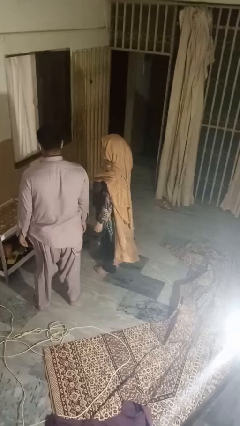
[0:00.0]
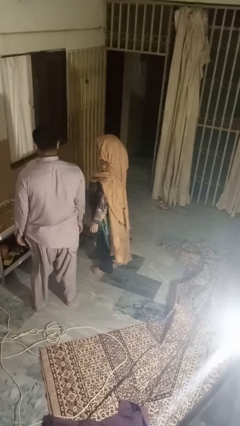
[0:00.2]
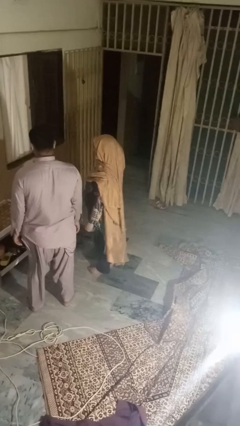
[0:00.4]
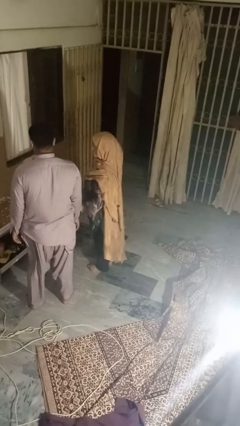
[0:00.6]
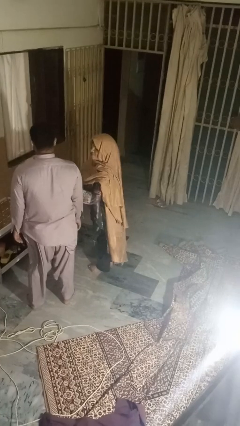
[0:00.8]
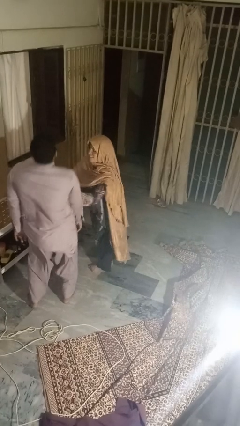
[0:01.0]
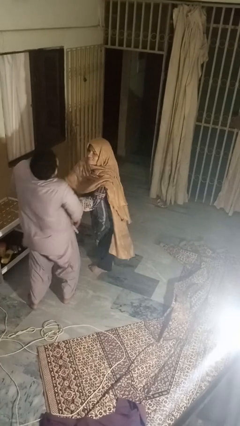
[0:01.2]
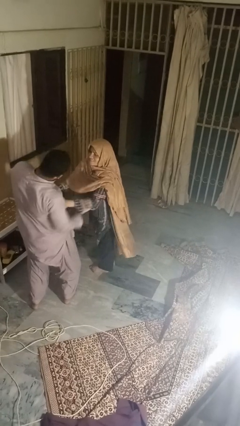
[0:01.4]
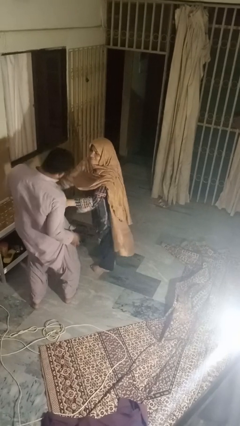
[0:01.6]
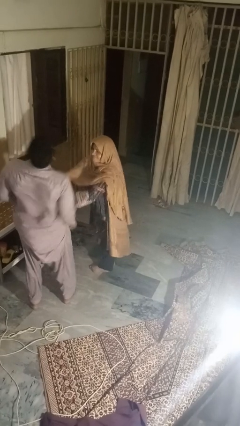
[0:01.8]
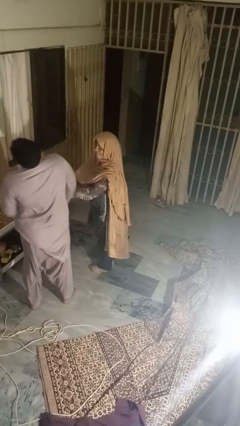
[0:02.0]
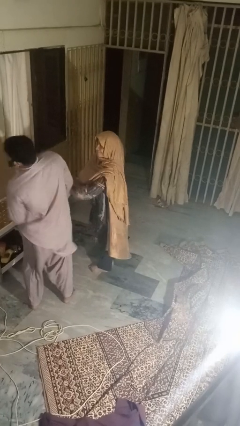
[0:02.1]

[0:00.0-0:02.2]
person tickles person

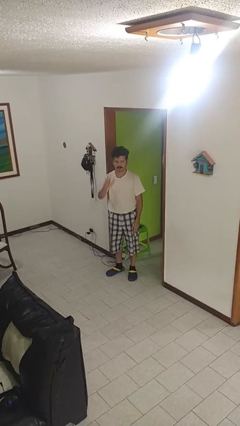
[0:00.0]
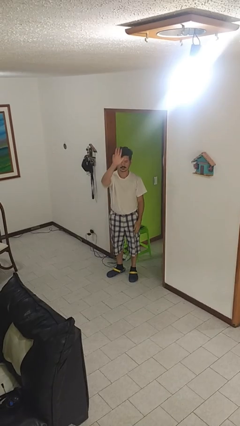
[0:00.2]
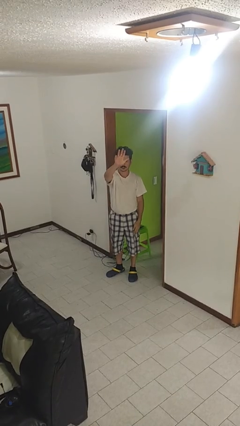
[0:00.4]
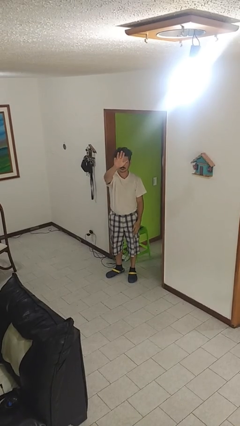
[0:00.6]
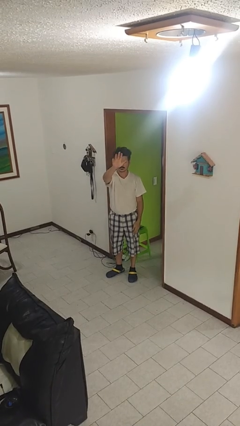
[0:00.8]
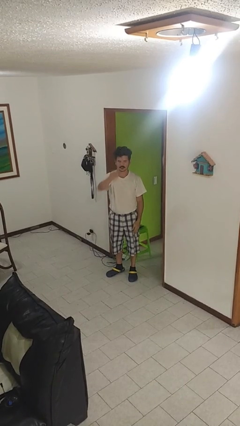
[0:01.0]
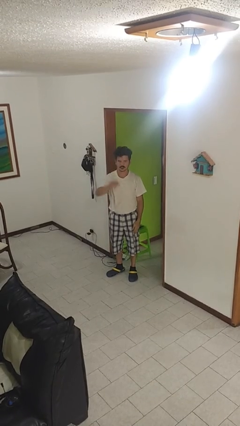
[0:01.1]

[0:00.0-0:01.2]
person gestures number four

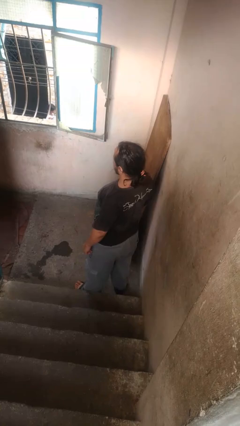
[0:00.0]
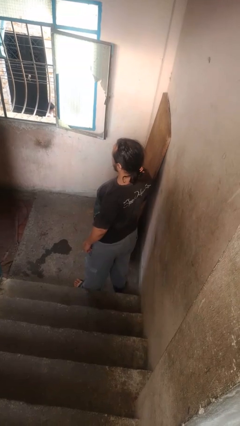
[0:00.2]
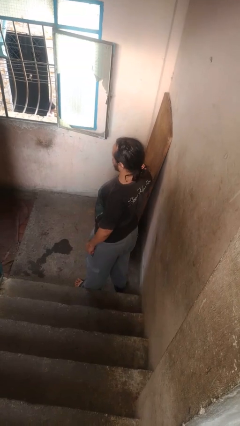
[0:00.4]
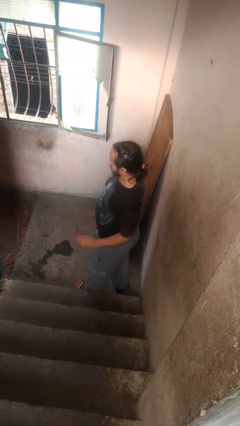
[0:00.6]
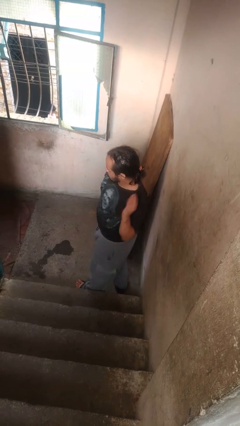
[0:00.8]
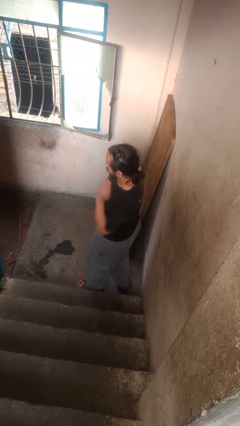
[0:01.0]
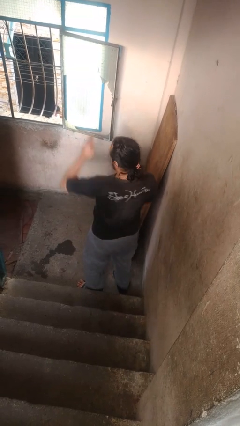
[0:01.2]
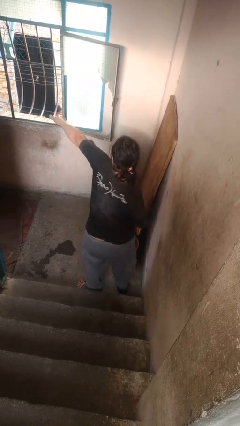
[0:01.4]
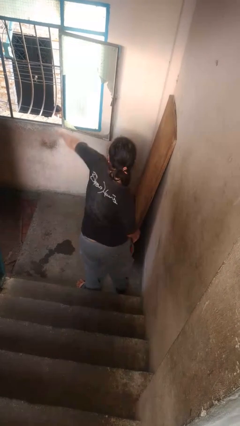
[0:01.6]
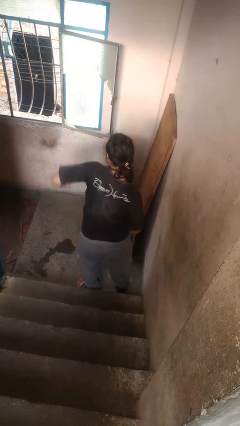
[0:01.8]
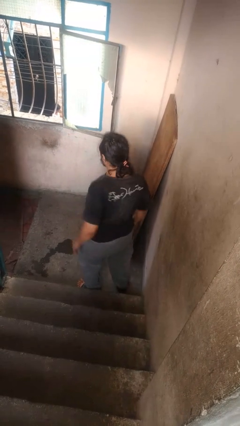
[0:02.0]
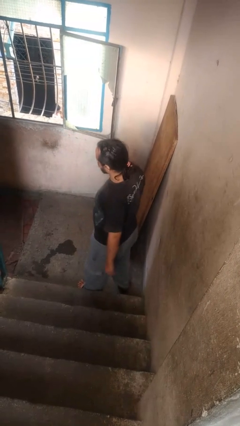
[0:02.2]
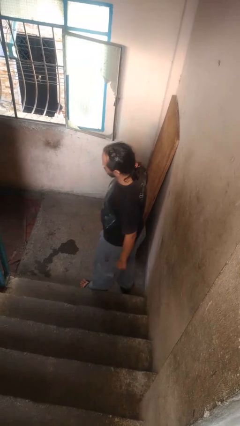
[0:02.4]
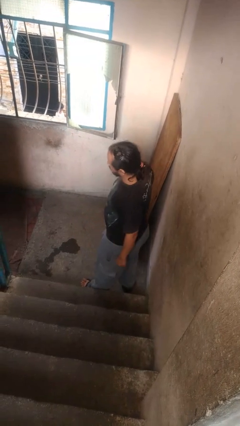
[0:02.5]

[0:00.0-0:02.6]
person karate chop

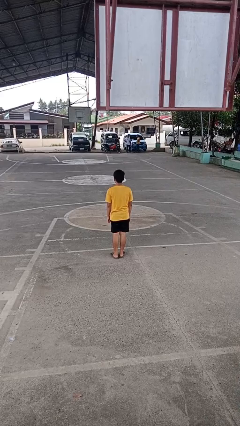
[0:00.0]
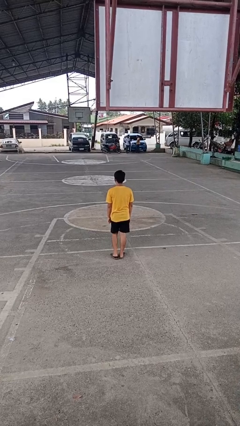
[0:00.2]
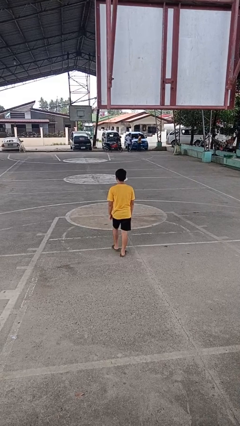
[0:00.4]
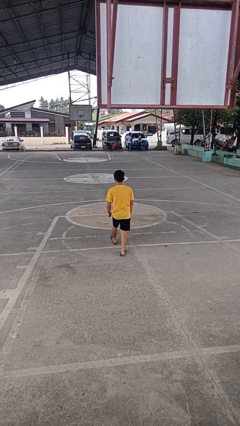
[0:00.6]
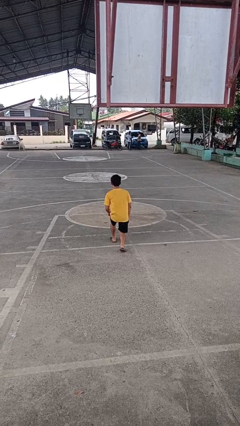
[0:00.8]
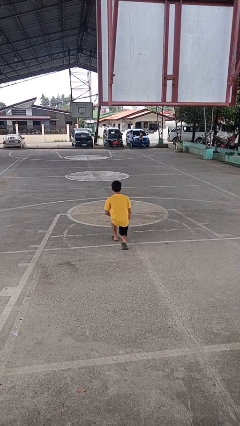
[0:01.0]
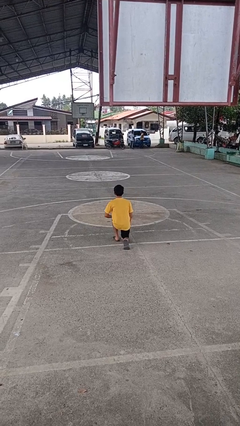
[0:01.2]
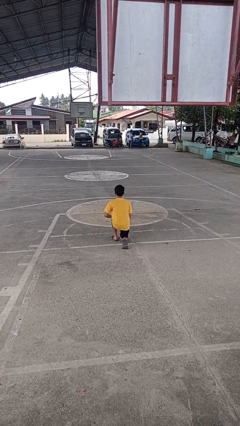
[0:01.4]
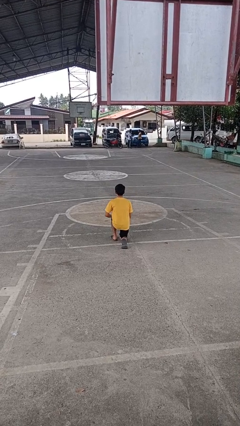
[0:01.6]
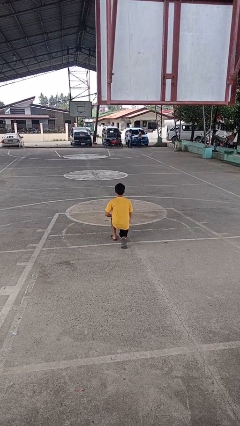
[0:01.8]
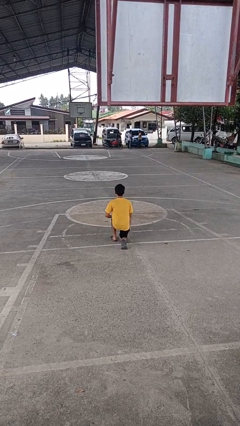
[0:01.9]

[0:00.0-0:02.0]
person kneels

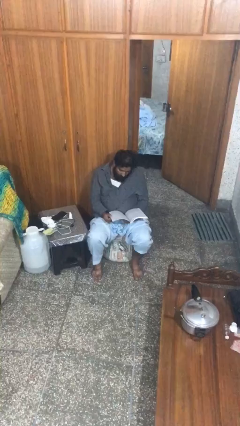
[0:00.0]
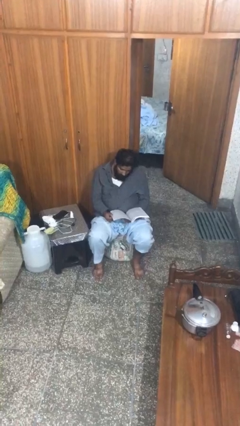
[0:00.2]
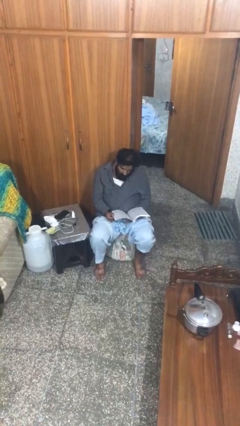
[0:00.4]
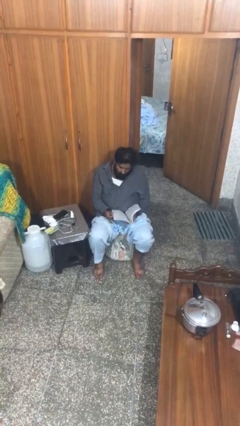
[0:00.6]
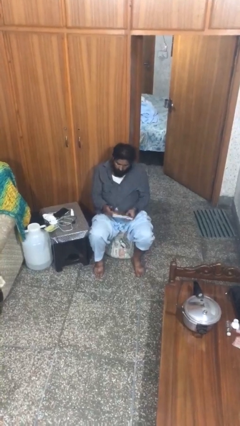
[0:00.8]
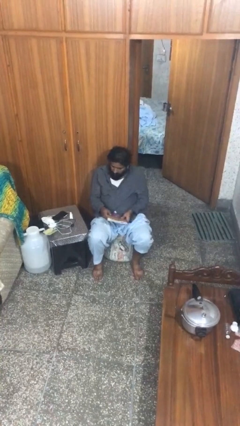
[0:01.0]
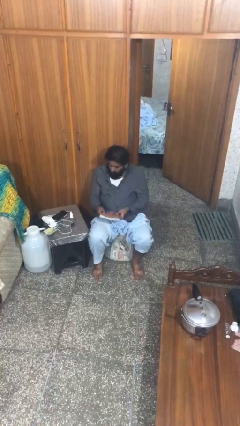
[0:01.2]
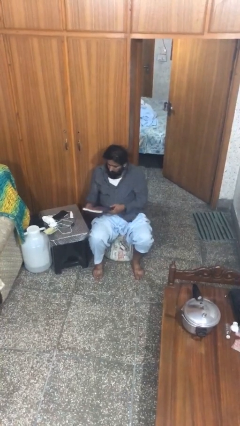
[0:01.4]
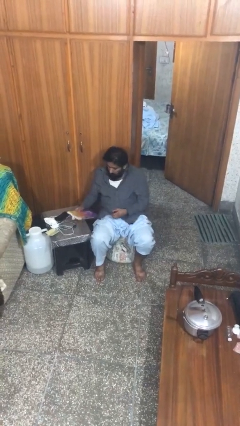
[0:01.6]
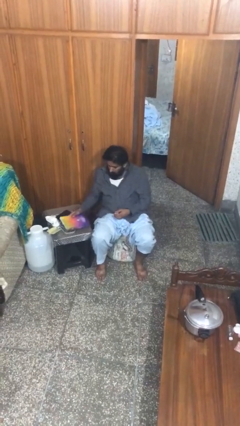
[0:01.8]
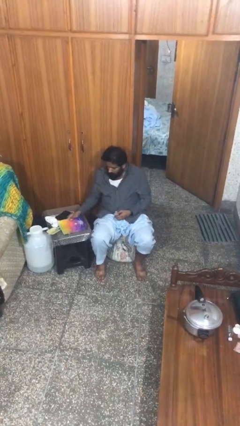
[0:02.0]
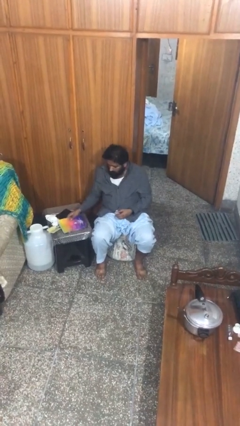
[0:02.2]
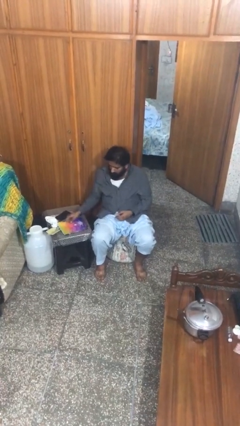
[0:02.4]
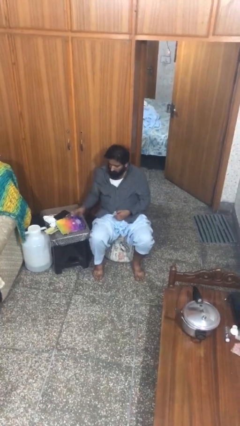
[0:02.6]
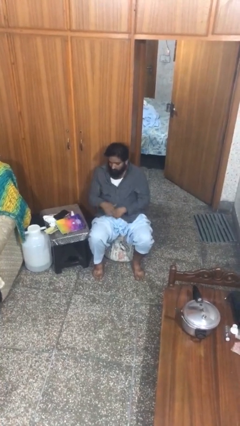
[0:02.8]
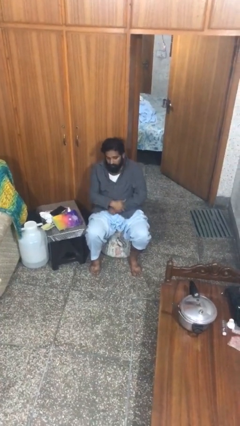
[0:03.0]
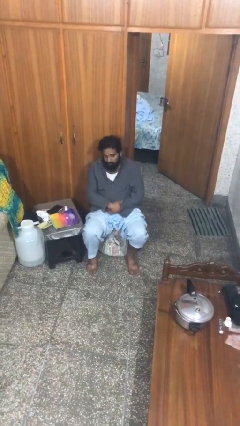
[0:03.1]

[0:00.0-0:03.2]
person puts down object on table

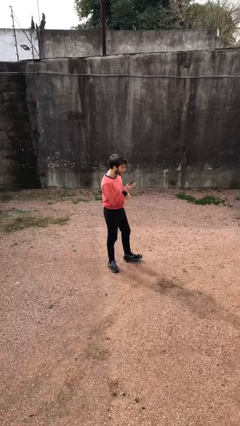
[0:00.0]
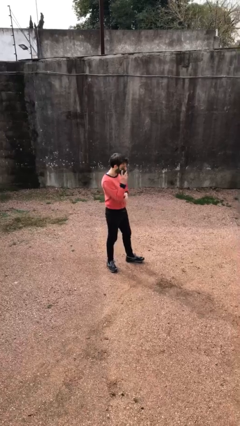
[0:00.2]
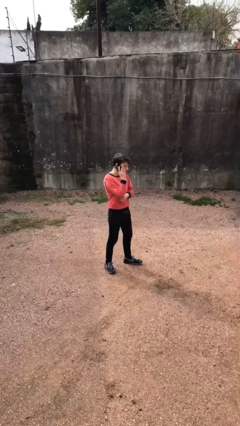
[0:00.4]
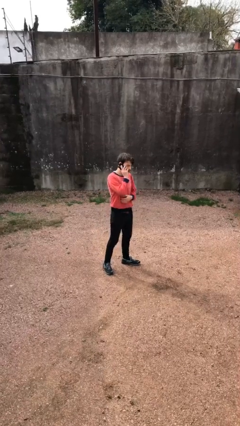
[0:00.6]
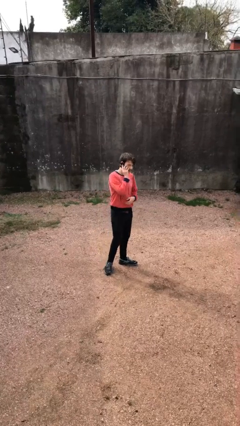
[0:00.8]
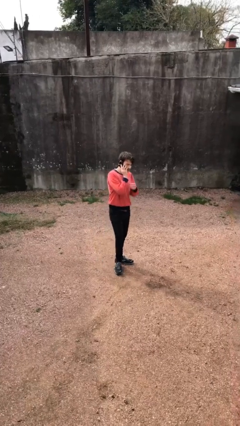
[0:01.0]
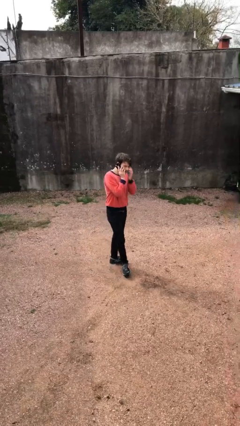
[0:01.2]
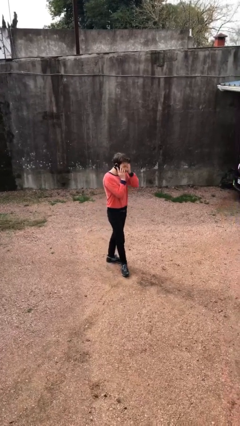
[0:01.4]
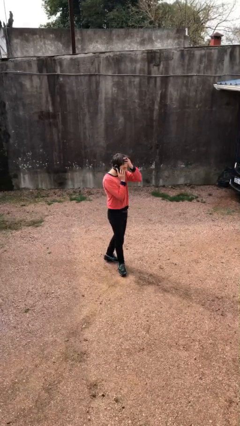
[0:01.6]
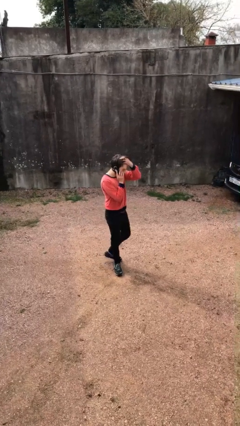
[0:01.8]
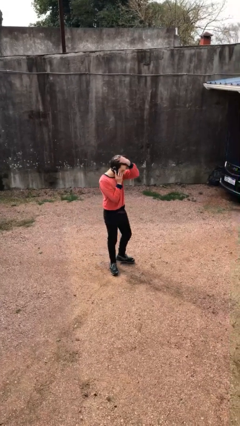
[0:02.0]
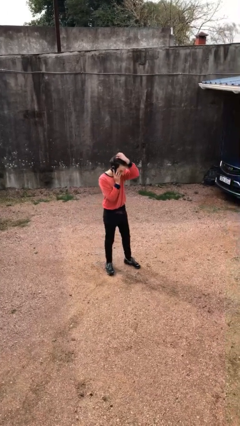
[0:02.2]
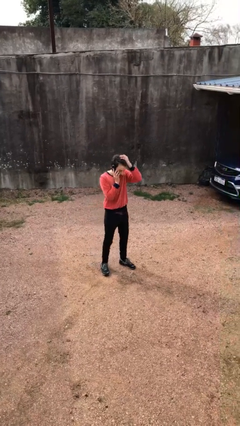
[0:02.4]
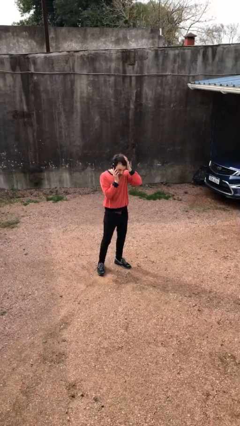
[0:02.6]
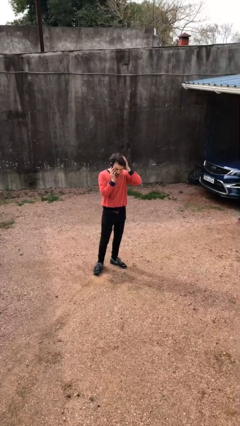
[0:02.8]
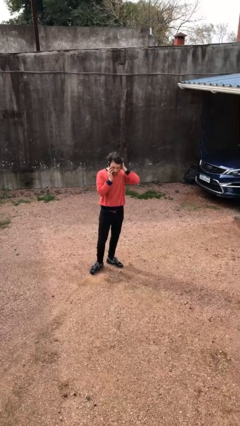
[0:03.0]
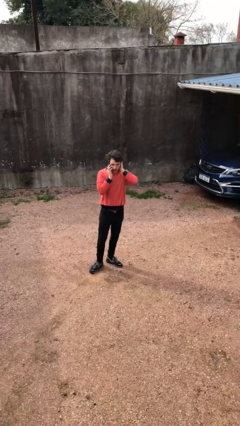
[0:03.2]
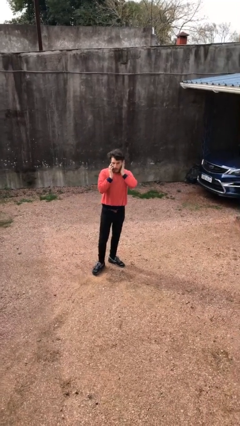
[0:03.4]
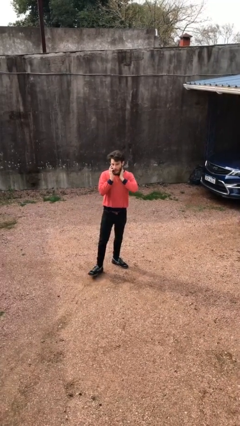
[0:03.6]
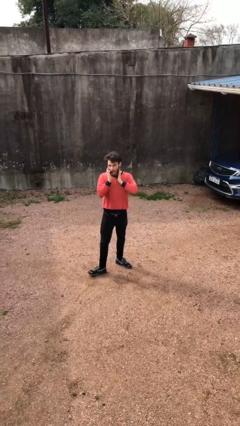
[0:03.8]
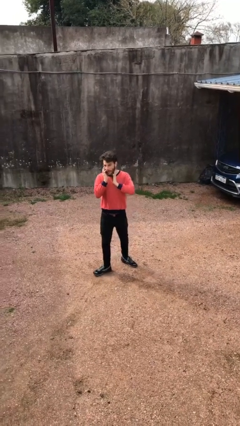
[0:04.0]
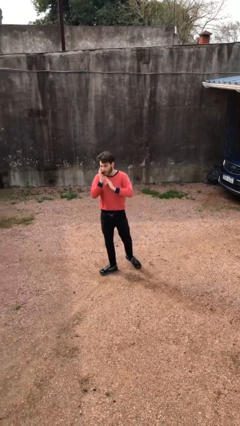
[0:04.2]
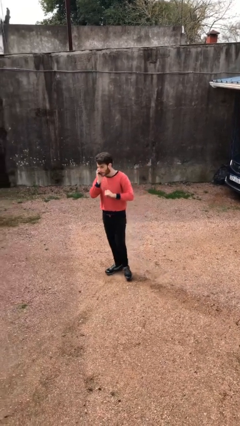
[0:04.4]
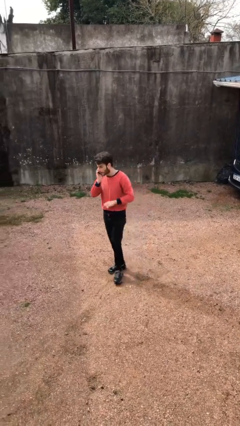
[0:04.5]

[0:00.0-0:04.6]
person talks on phone

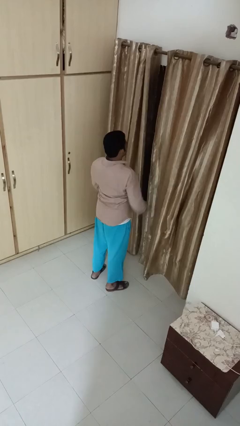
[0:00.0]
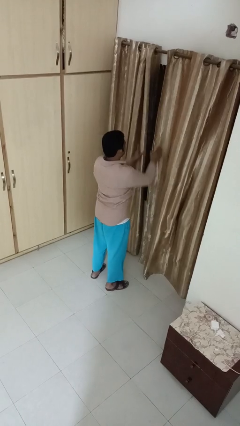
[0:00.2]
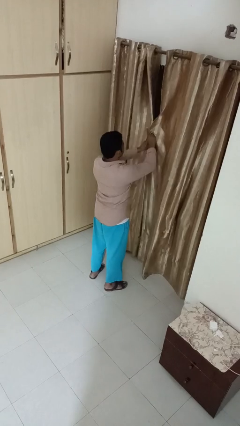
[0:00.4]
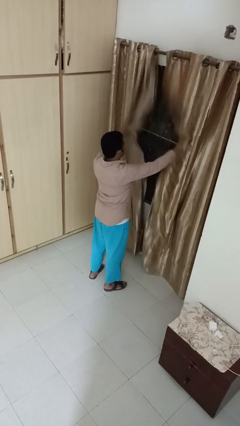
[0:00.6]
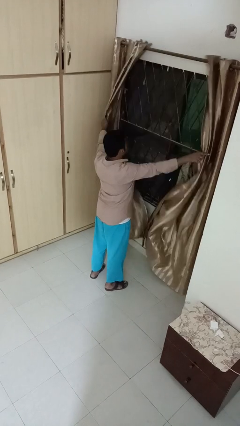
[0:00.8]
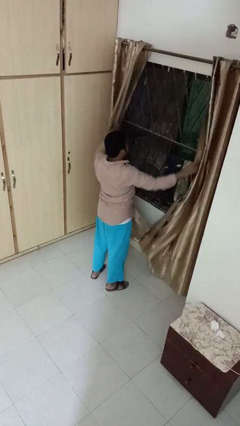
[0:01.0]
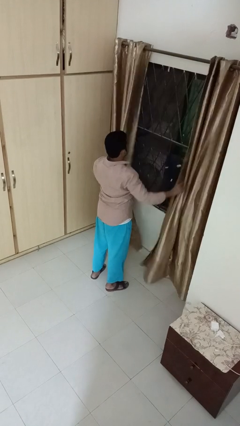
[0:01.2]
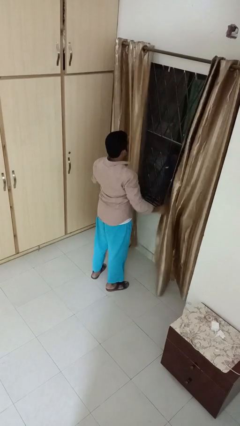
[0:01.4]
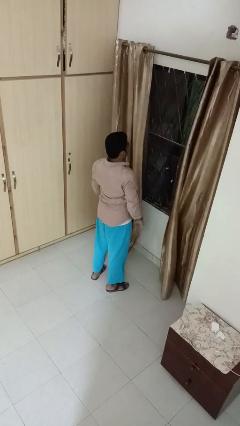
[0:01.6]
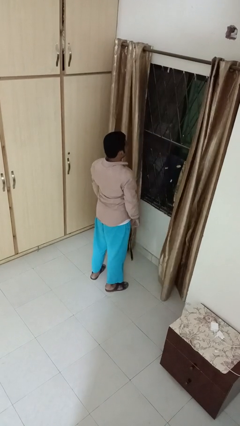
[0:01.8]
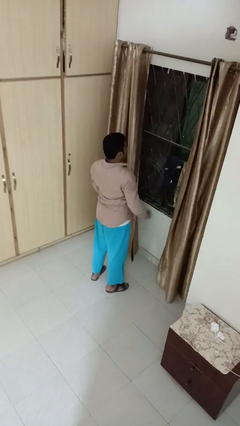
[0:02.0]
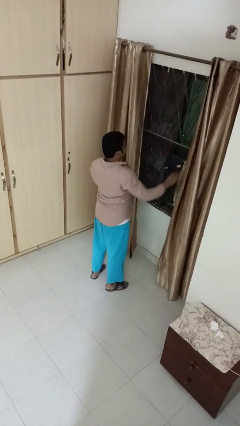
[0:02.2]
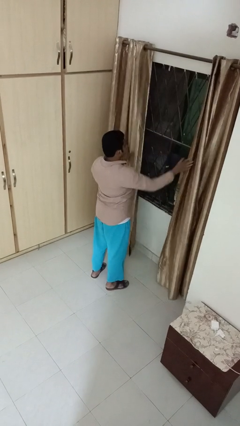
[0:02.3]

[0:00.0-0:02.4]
person opens curtains
